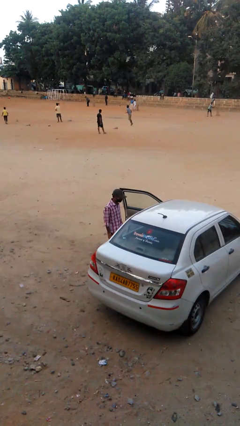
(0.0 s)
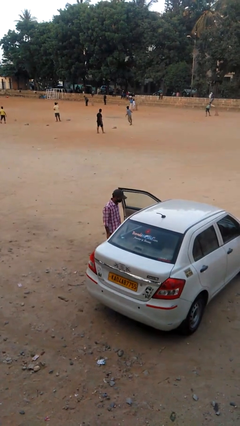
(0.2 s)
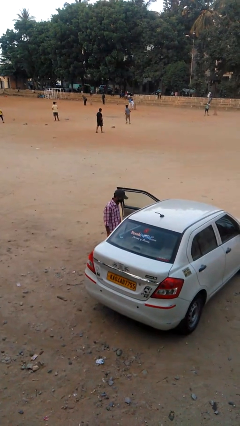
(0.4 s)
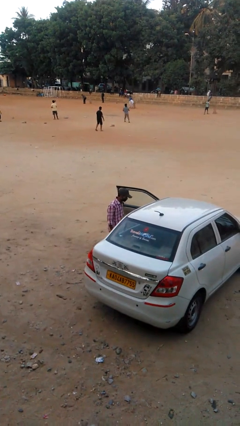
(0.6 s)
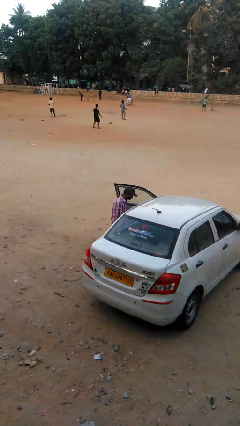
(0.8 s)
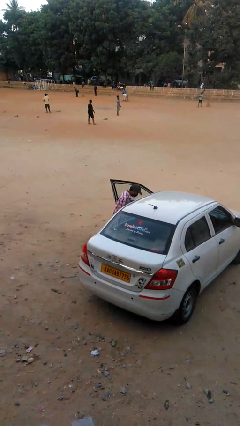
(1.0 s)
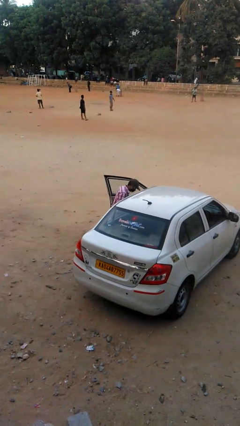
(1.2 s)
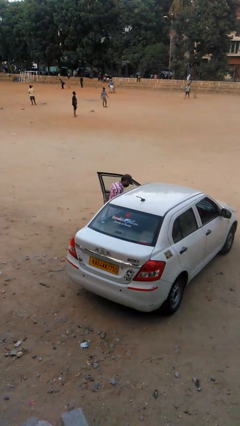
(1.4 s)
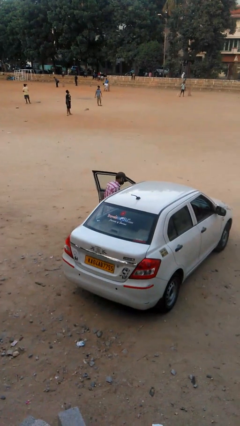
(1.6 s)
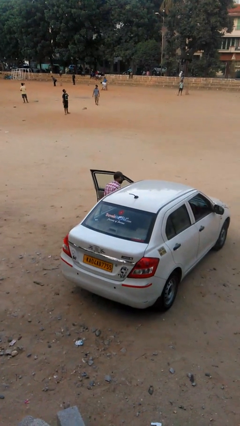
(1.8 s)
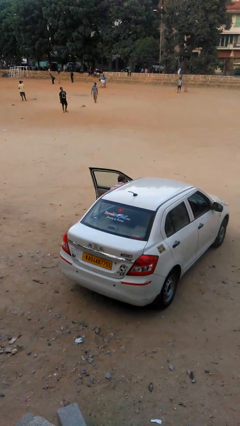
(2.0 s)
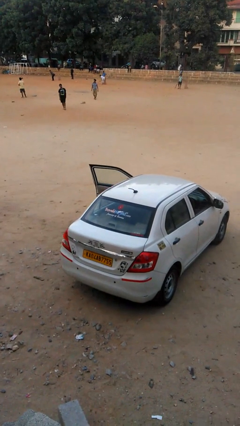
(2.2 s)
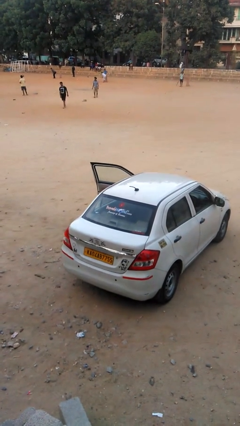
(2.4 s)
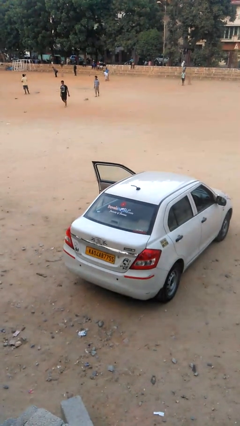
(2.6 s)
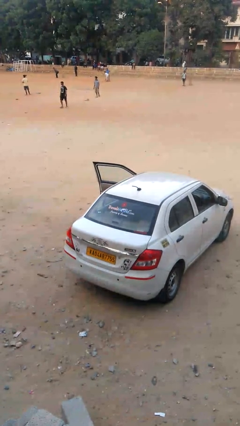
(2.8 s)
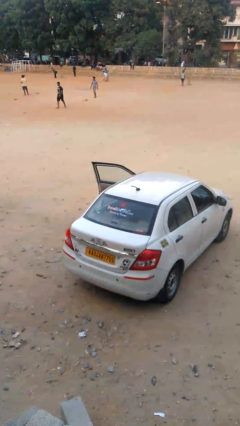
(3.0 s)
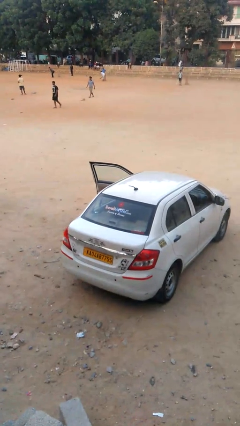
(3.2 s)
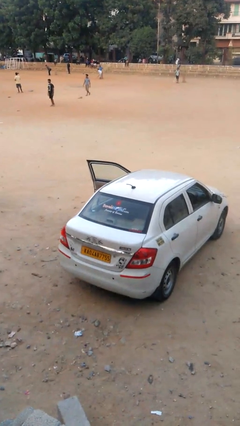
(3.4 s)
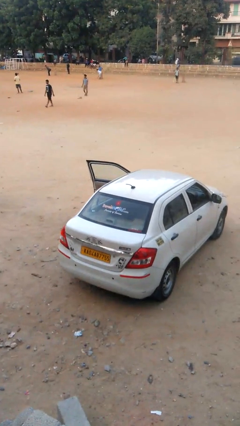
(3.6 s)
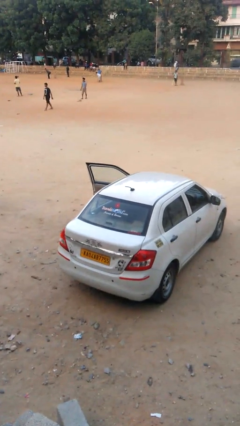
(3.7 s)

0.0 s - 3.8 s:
person enters car

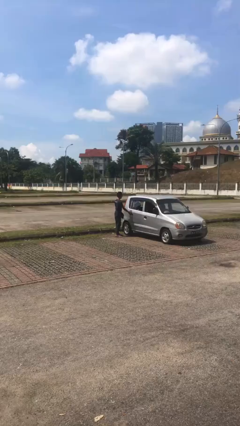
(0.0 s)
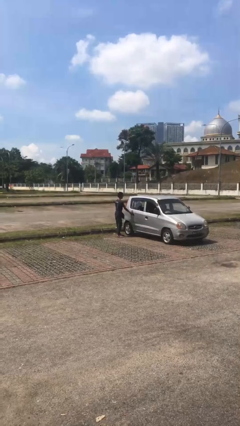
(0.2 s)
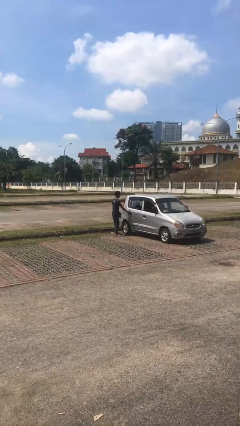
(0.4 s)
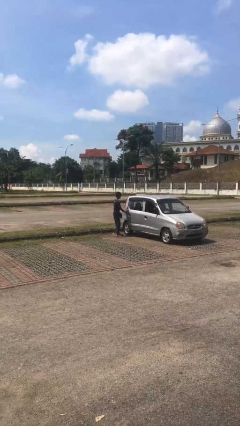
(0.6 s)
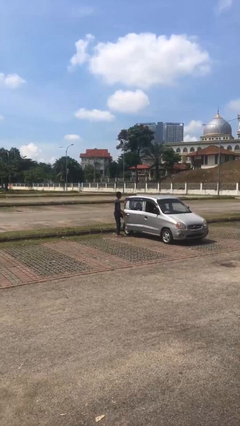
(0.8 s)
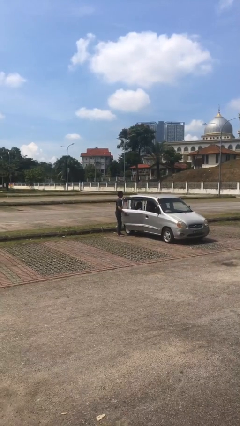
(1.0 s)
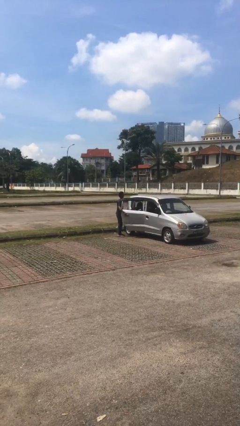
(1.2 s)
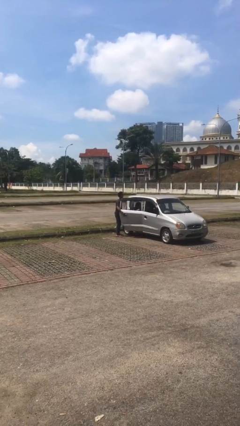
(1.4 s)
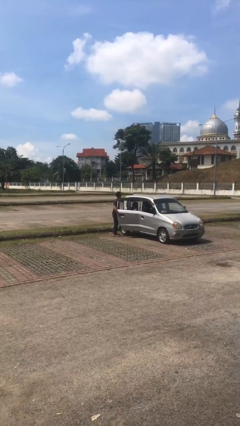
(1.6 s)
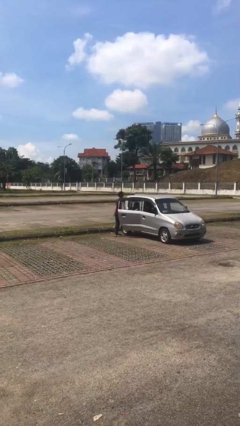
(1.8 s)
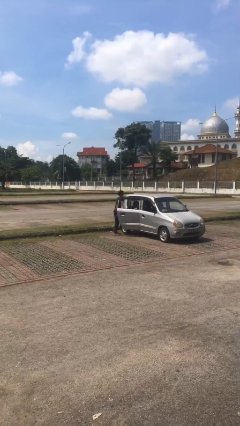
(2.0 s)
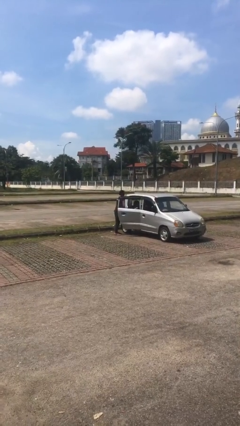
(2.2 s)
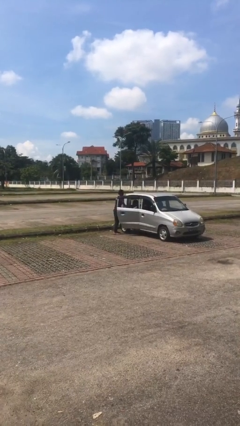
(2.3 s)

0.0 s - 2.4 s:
person opens car door

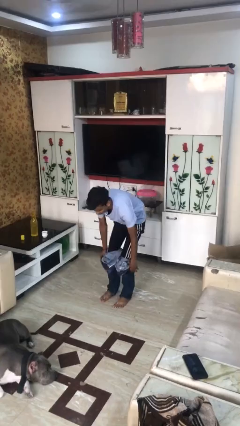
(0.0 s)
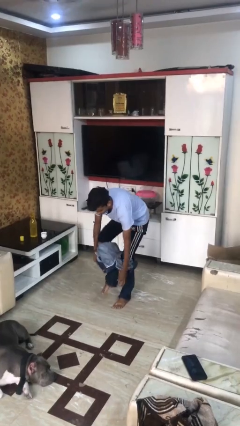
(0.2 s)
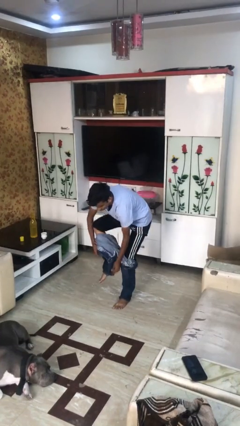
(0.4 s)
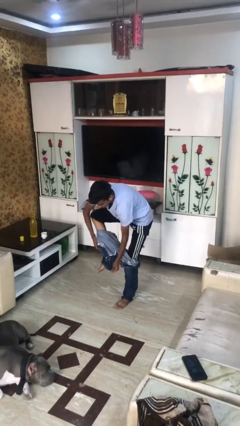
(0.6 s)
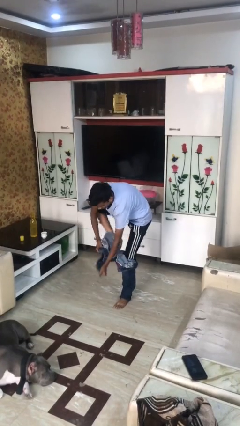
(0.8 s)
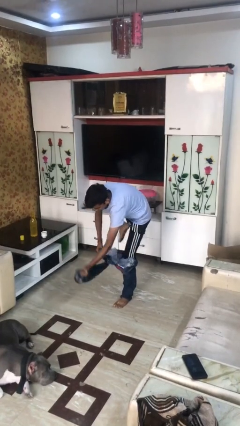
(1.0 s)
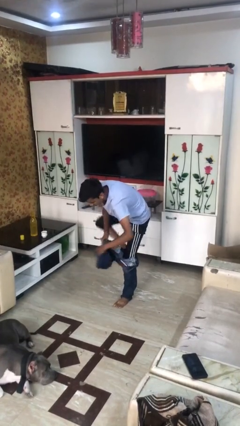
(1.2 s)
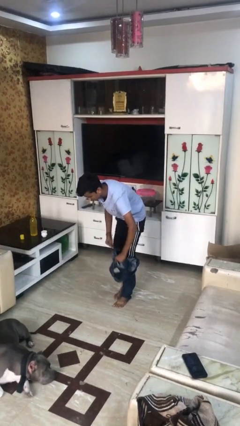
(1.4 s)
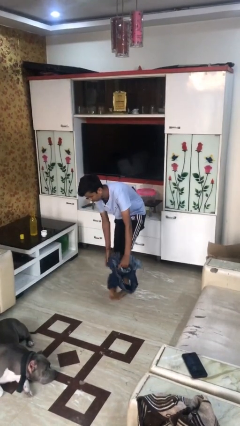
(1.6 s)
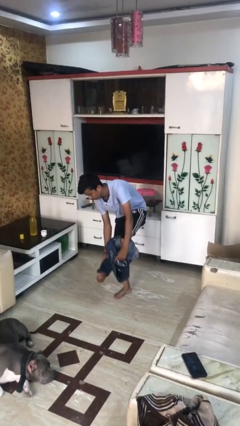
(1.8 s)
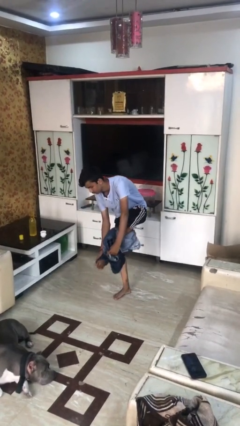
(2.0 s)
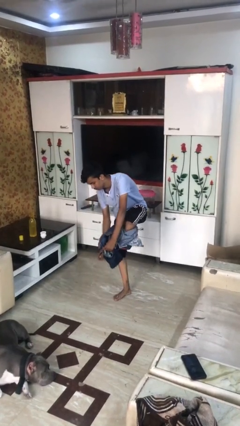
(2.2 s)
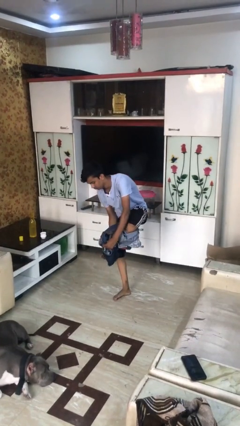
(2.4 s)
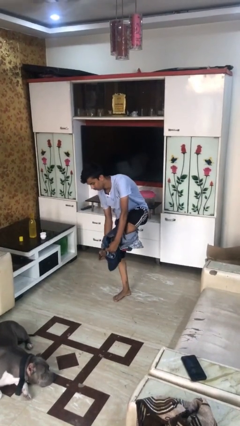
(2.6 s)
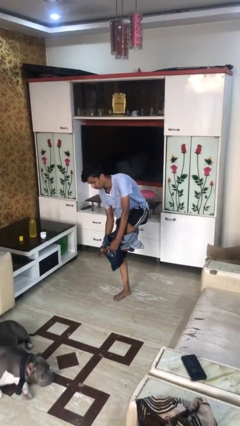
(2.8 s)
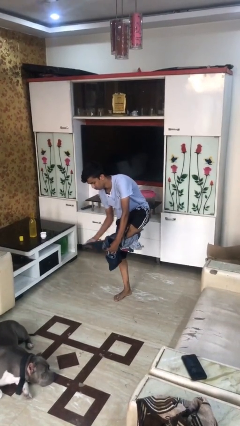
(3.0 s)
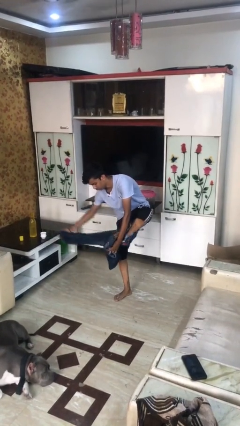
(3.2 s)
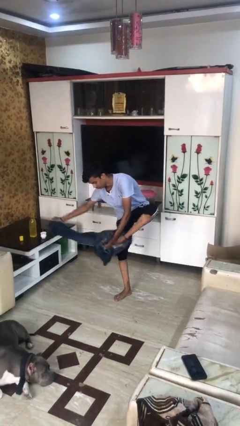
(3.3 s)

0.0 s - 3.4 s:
person takes off pants

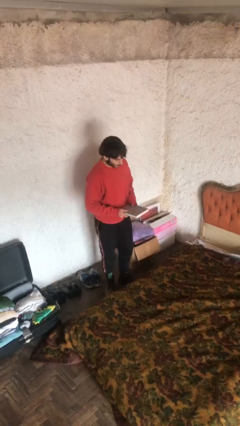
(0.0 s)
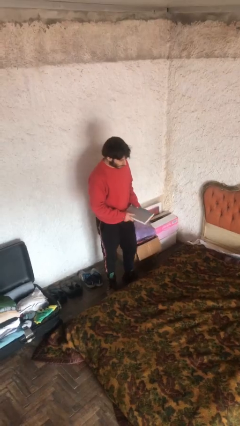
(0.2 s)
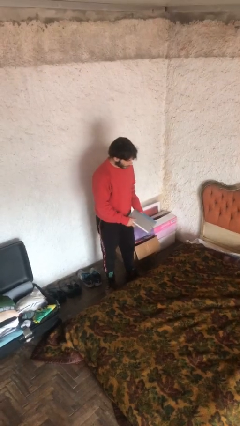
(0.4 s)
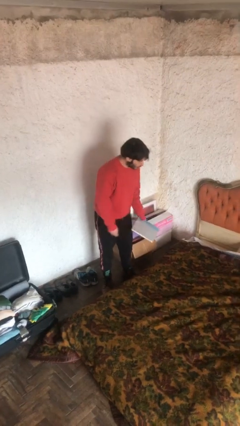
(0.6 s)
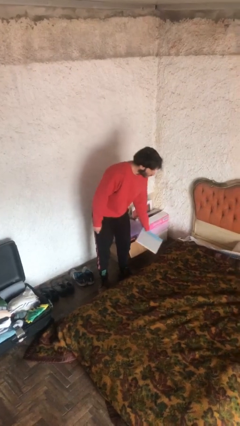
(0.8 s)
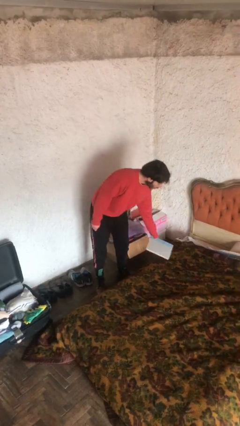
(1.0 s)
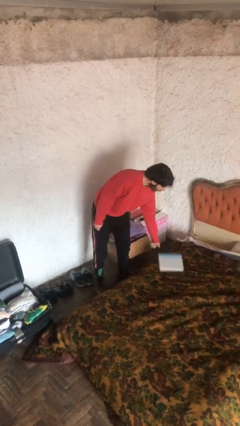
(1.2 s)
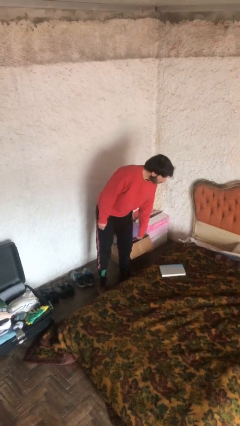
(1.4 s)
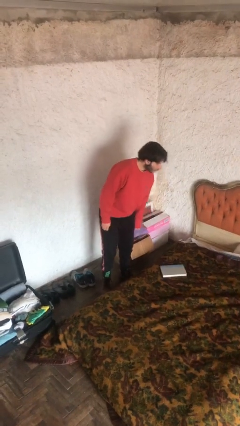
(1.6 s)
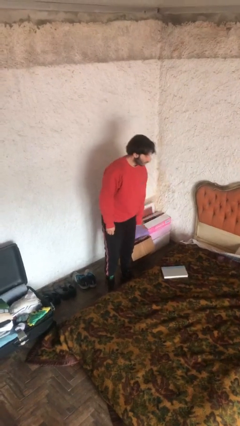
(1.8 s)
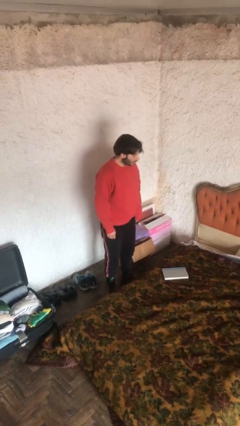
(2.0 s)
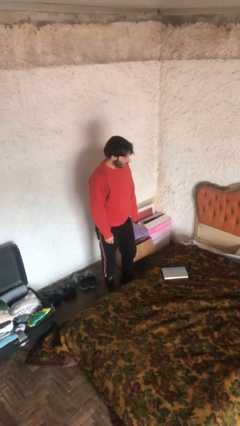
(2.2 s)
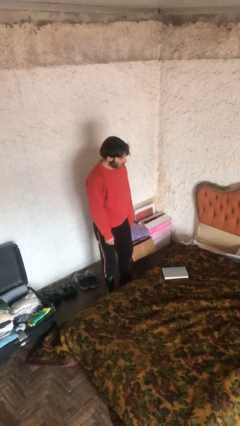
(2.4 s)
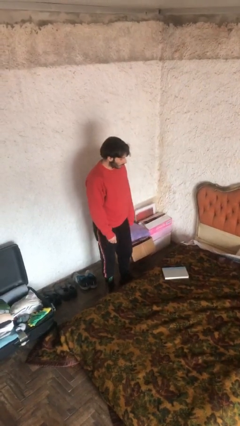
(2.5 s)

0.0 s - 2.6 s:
person puts down object on bed

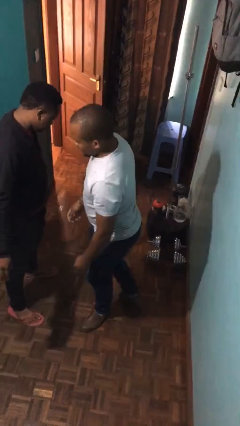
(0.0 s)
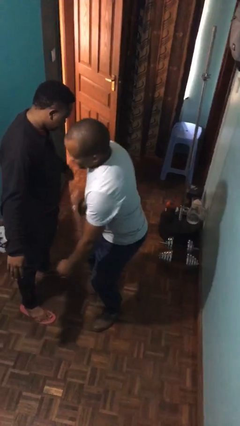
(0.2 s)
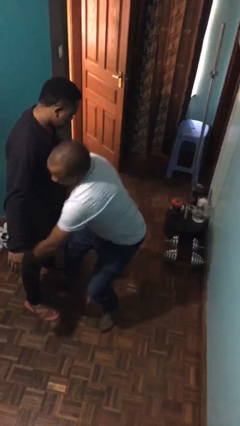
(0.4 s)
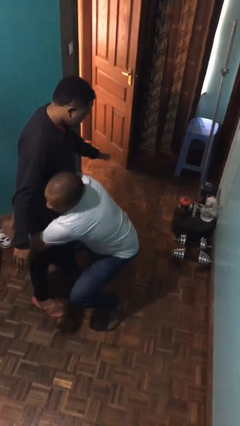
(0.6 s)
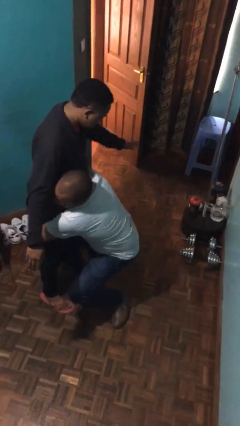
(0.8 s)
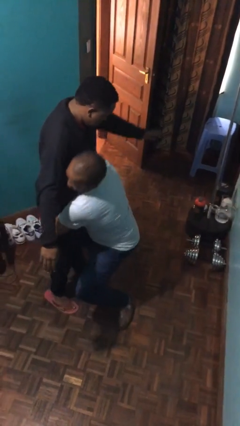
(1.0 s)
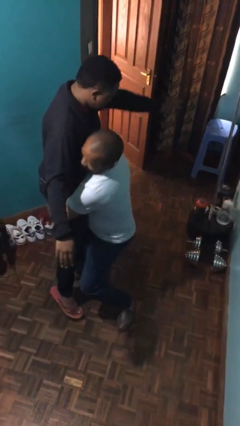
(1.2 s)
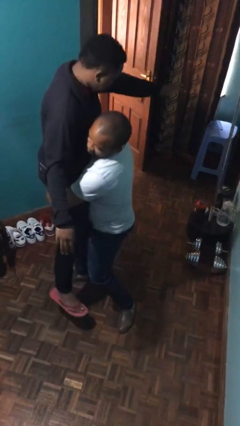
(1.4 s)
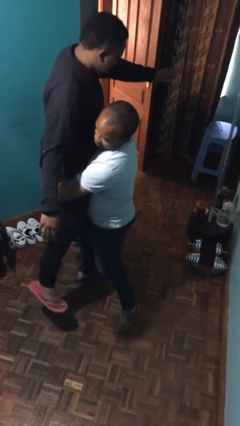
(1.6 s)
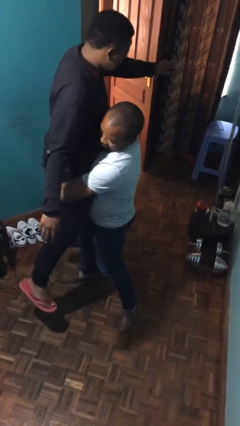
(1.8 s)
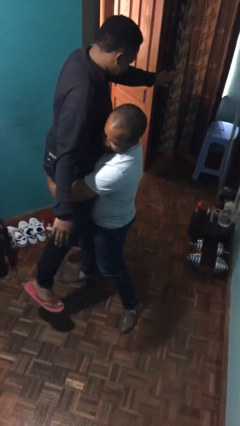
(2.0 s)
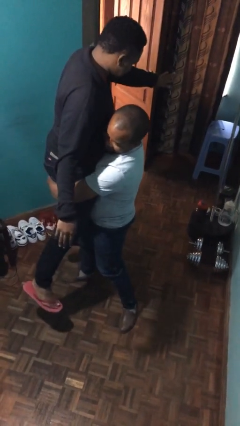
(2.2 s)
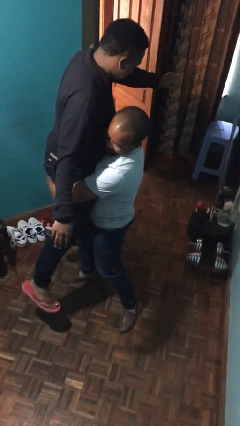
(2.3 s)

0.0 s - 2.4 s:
person picks up person

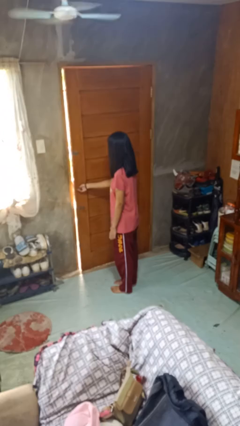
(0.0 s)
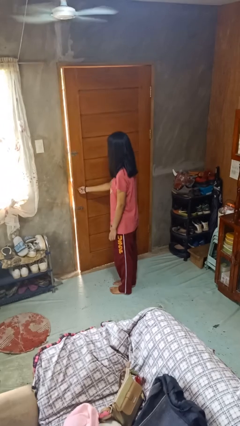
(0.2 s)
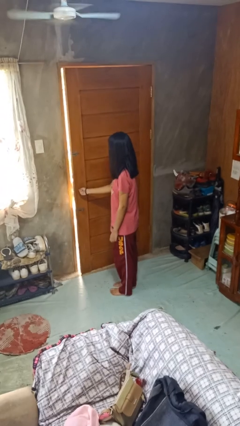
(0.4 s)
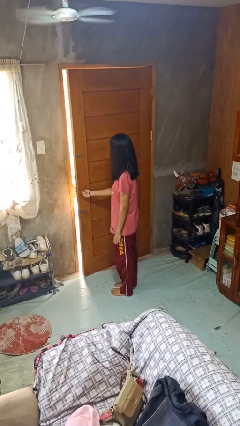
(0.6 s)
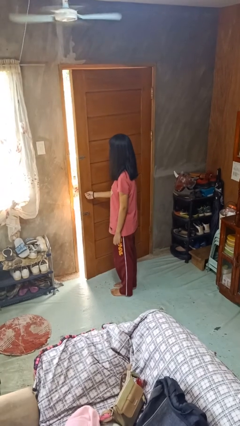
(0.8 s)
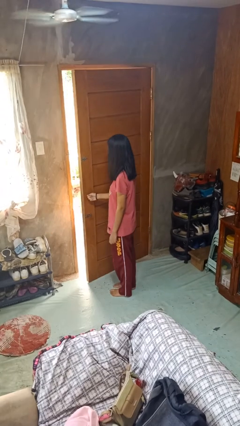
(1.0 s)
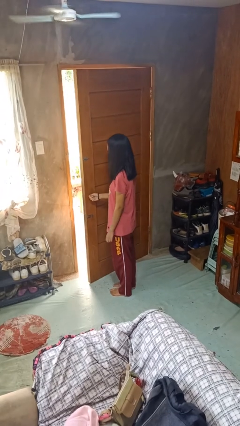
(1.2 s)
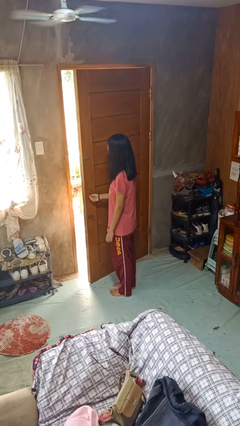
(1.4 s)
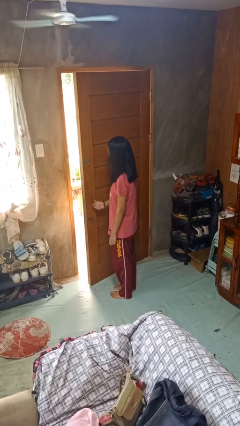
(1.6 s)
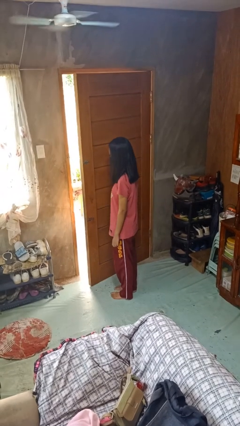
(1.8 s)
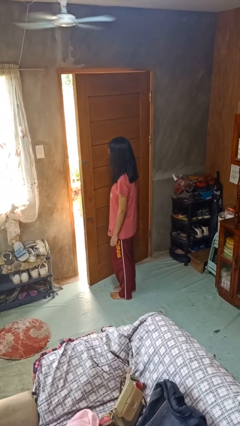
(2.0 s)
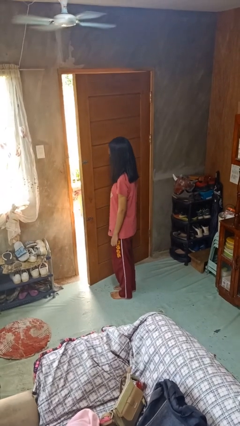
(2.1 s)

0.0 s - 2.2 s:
person opens facility door

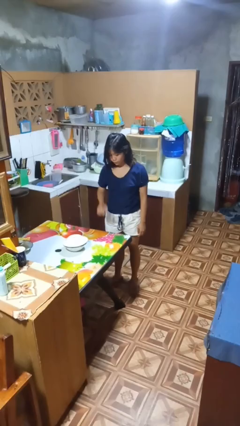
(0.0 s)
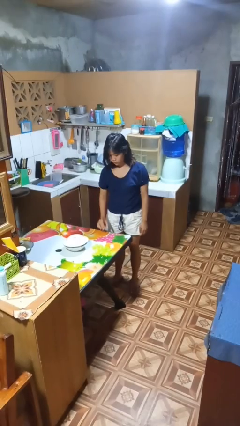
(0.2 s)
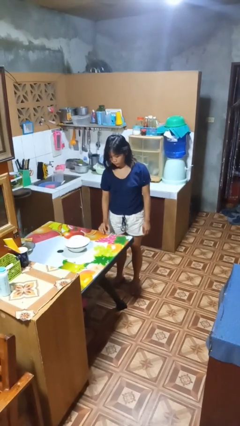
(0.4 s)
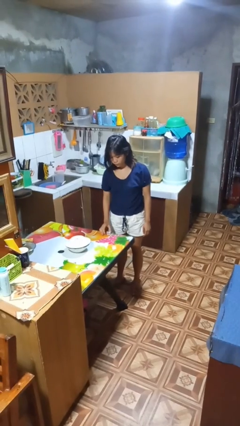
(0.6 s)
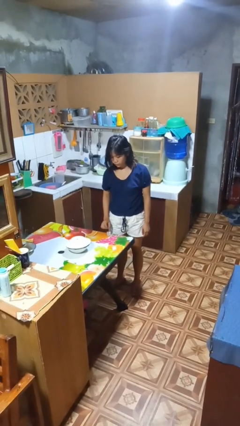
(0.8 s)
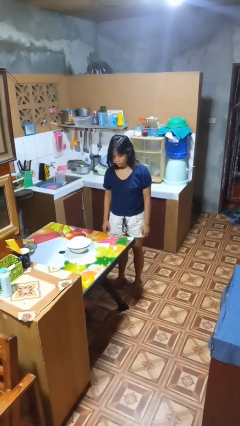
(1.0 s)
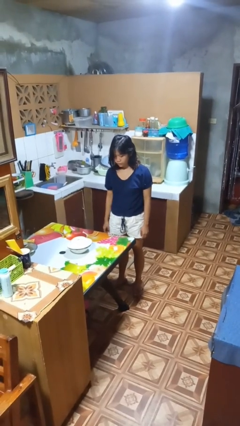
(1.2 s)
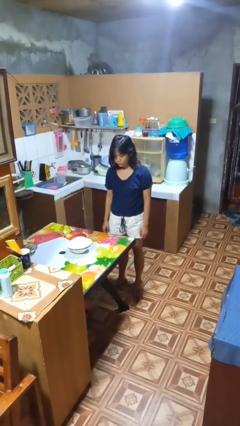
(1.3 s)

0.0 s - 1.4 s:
person puts down object on table
